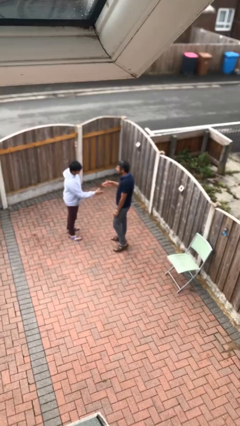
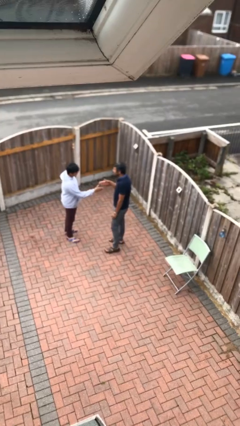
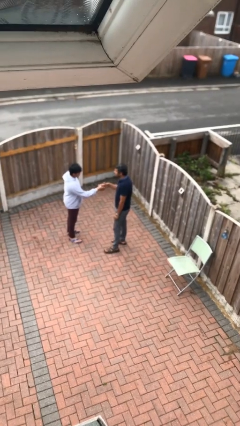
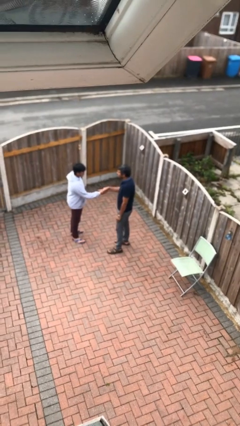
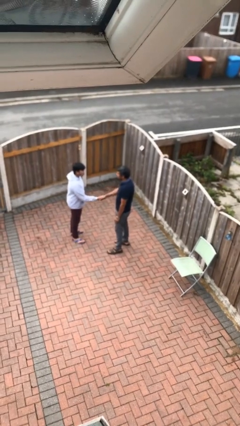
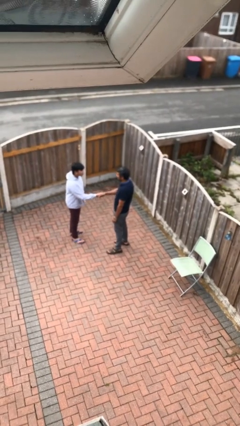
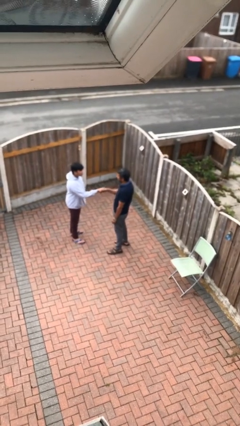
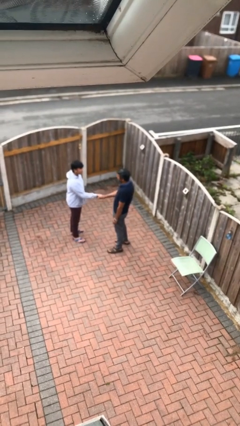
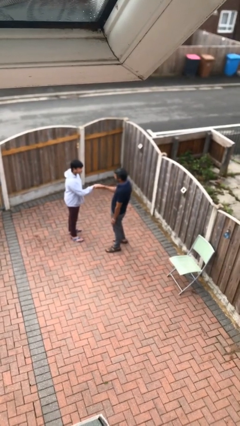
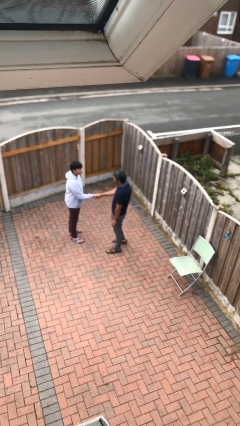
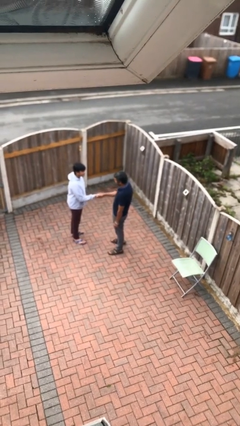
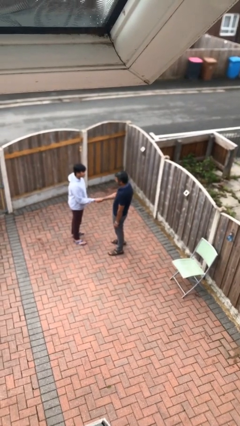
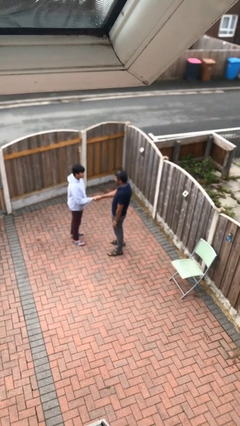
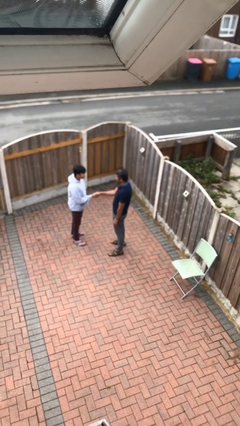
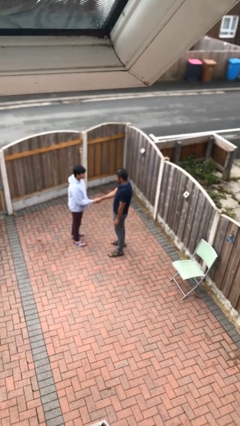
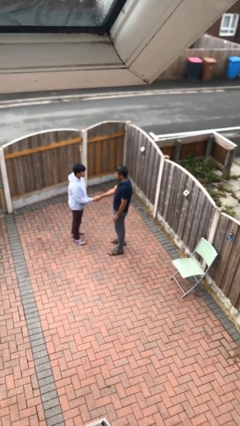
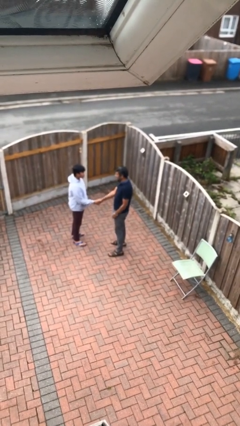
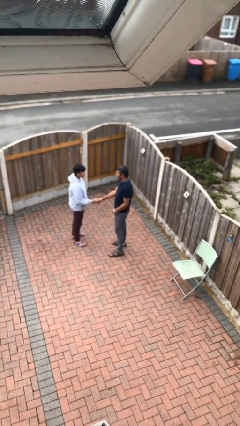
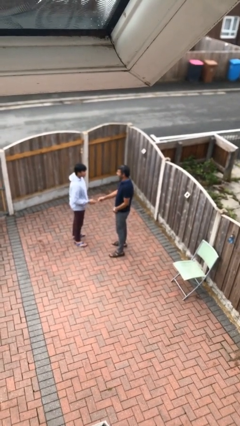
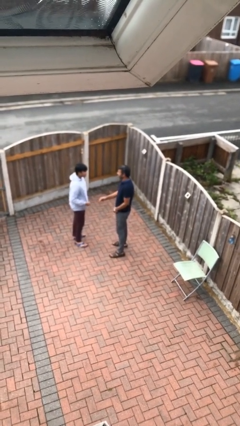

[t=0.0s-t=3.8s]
person shakes hand

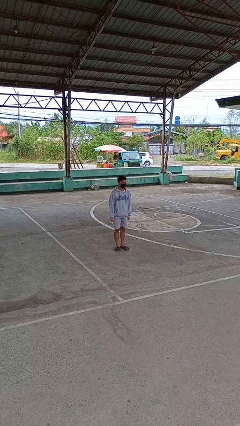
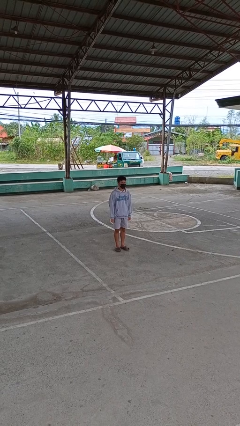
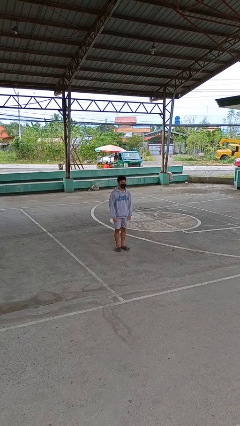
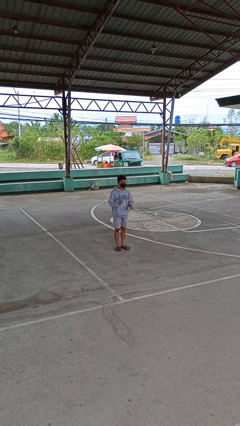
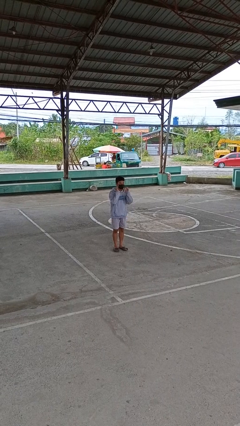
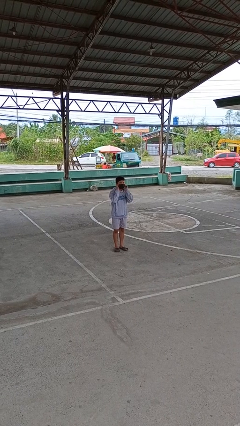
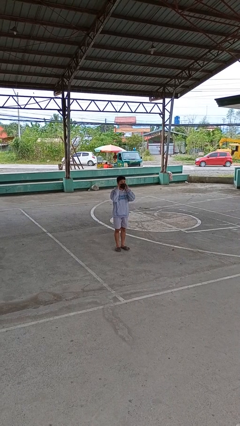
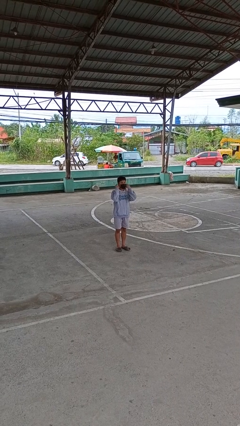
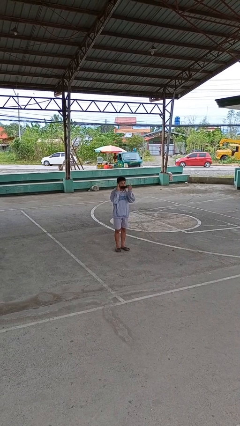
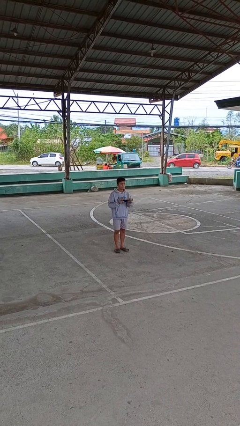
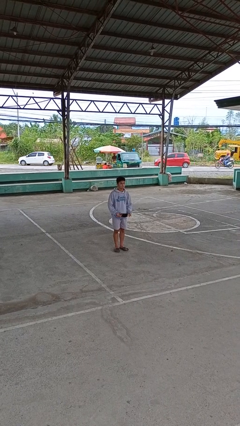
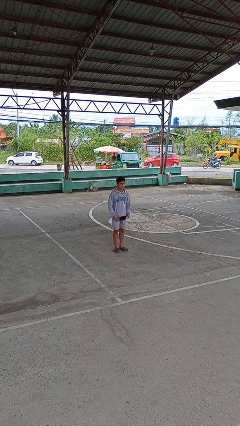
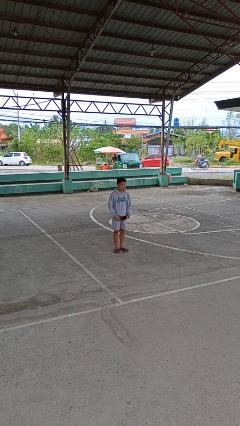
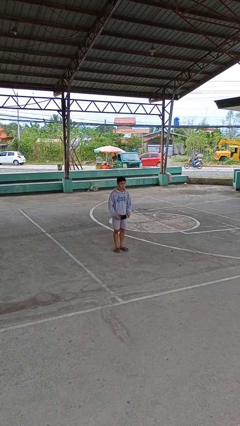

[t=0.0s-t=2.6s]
person takes off facemask

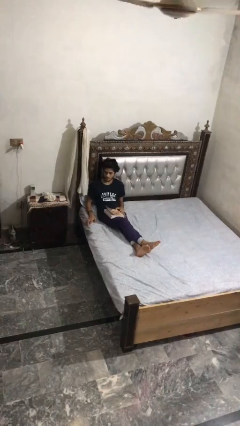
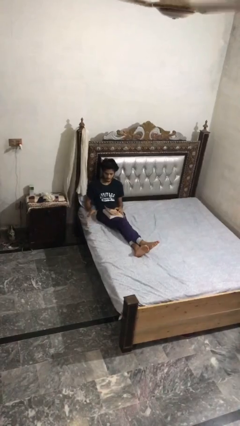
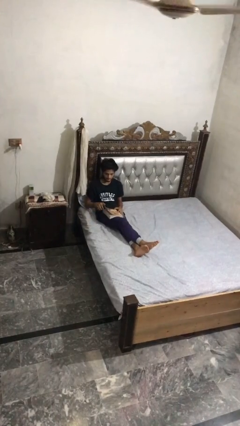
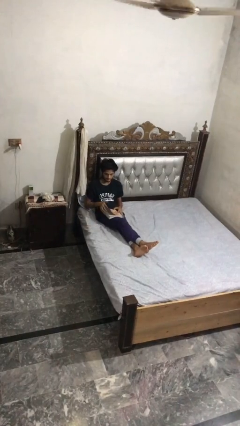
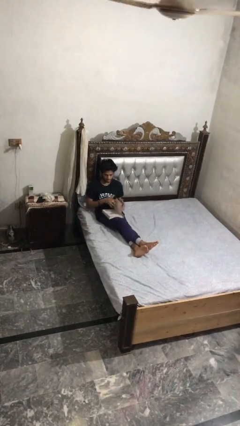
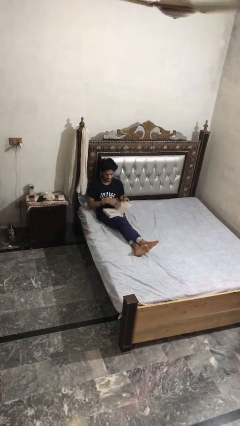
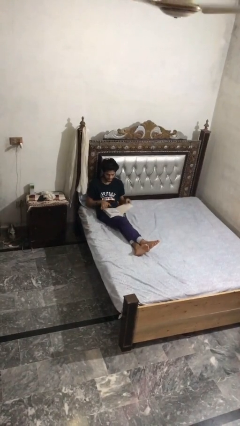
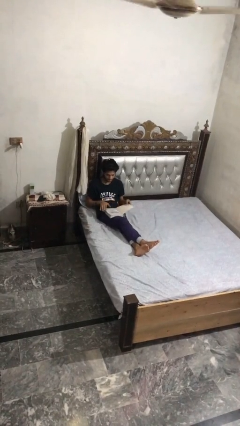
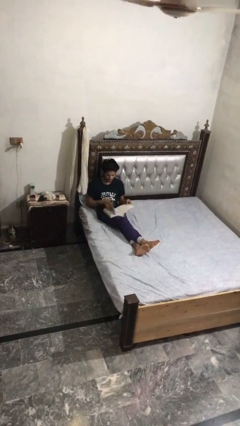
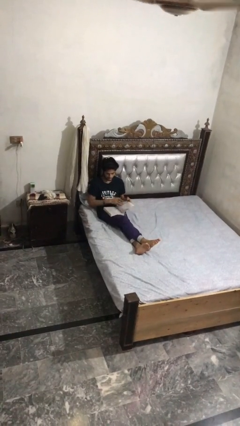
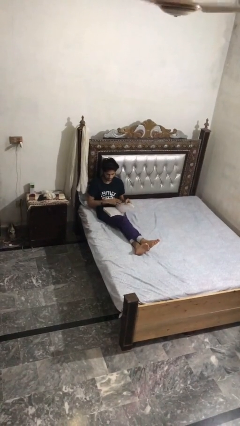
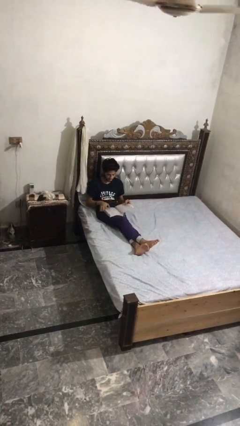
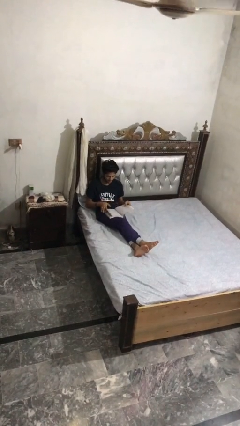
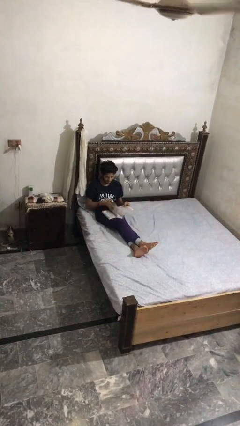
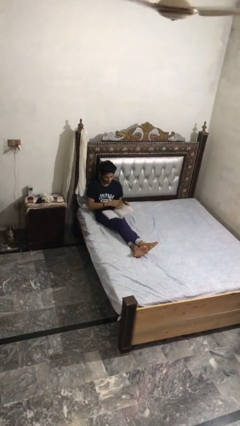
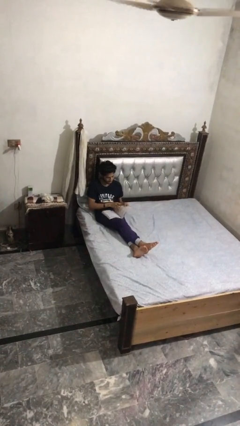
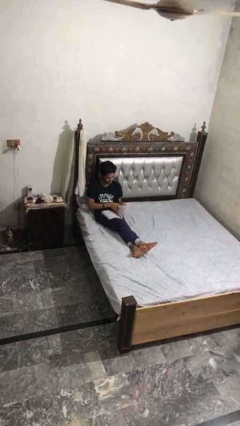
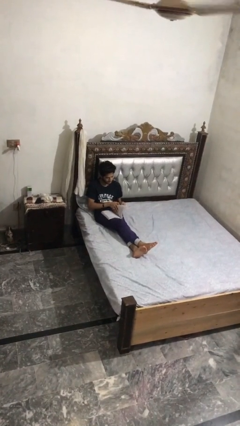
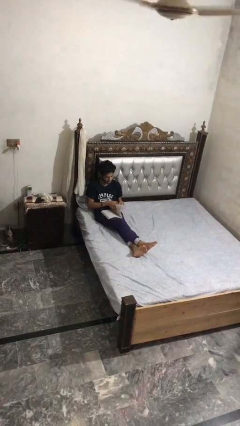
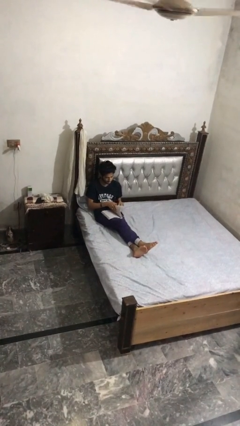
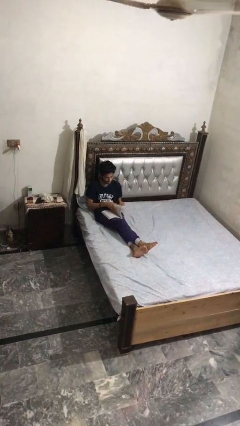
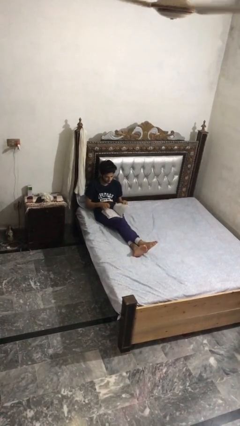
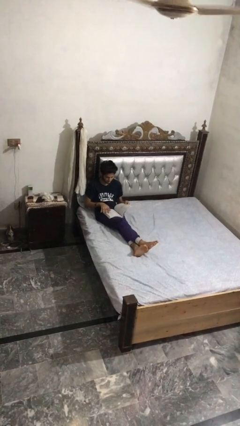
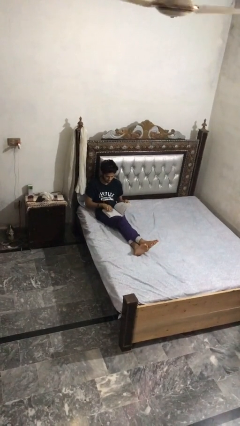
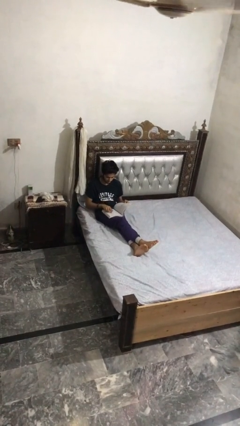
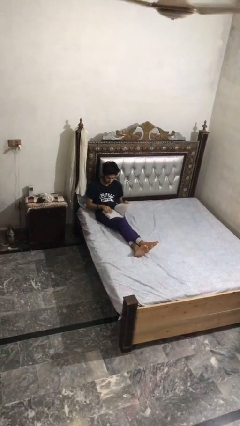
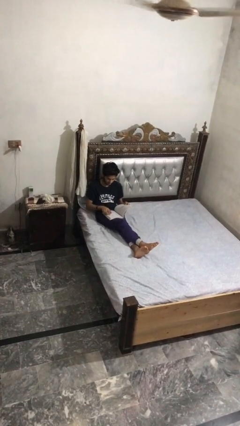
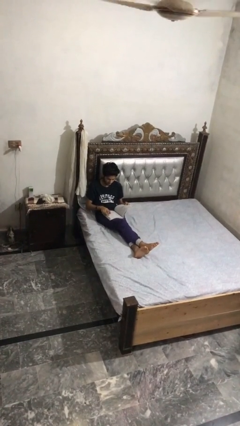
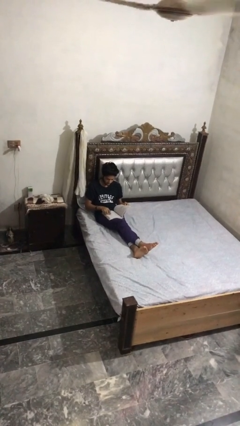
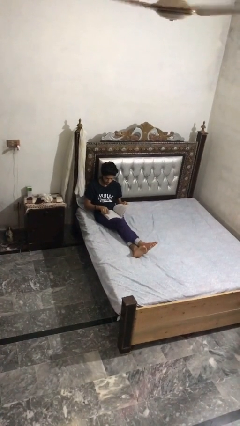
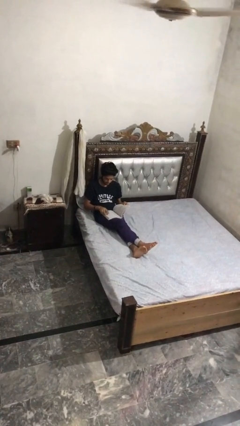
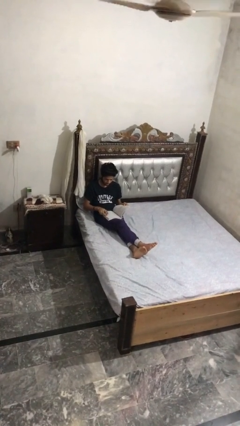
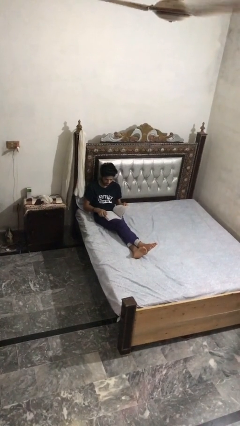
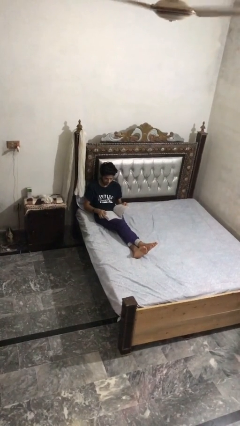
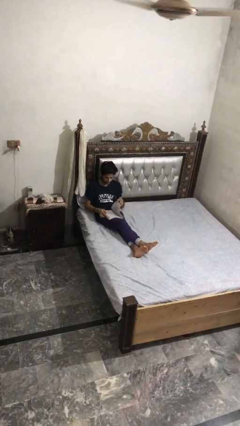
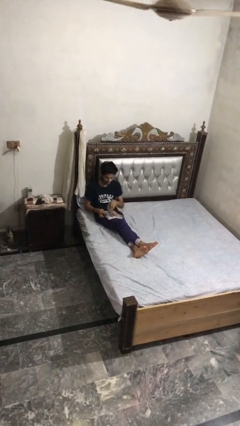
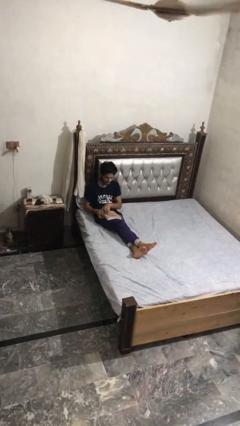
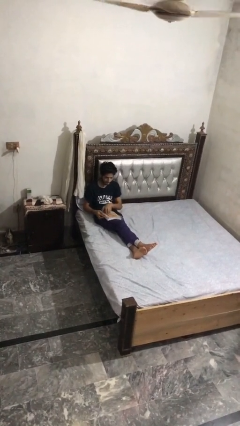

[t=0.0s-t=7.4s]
person reads book

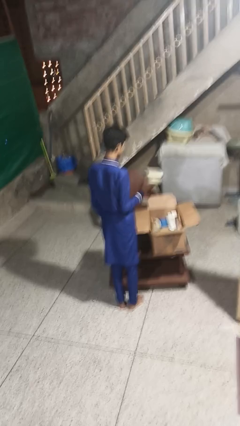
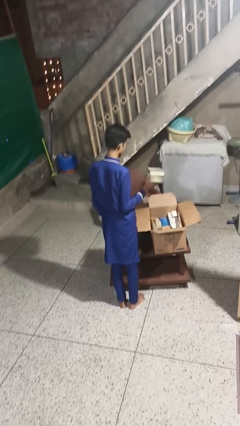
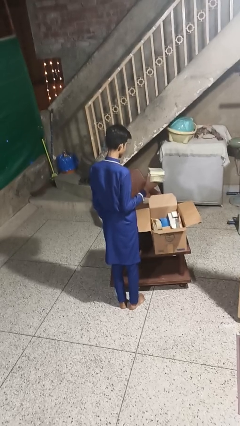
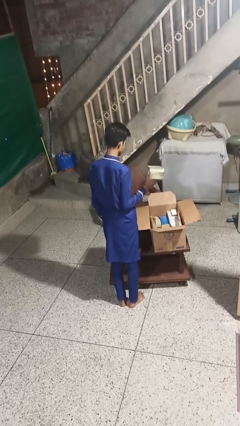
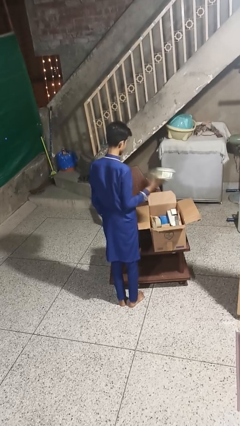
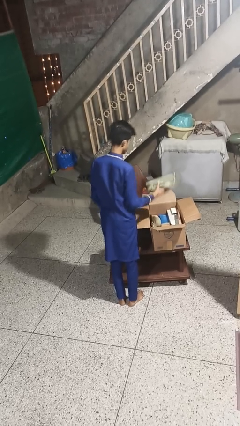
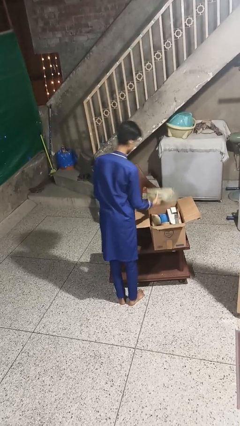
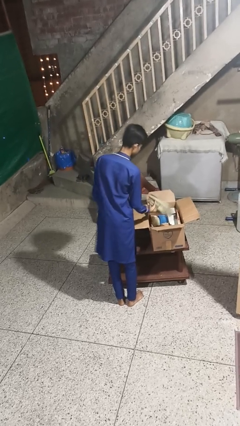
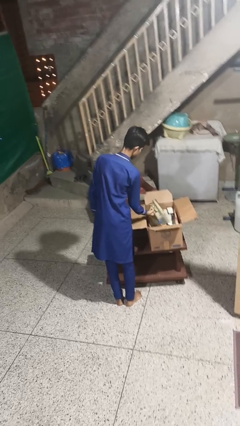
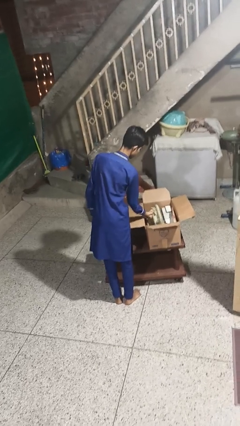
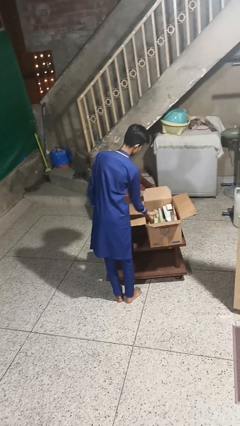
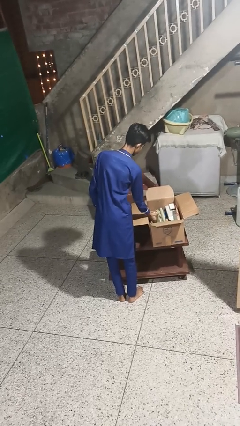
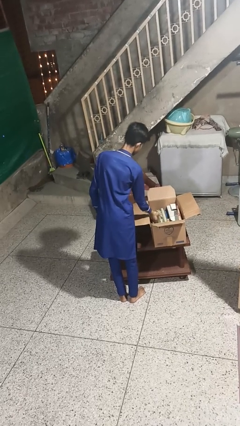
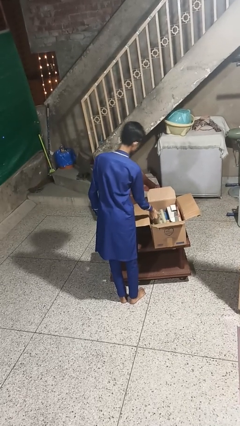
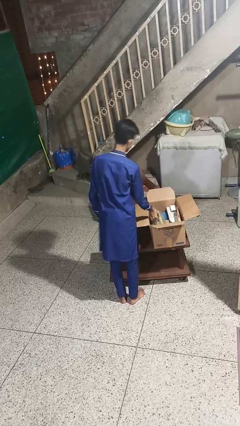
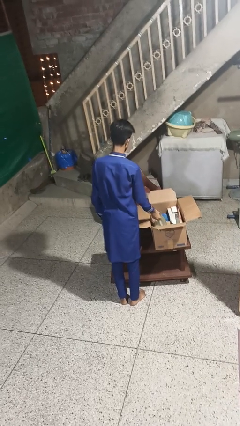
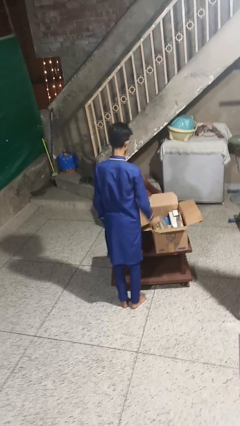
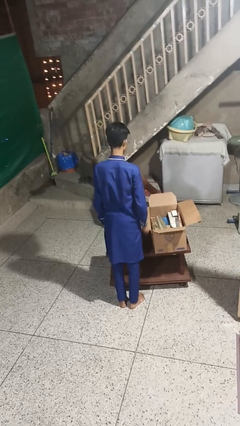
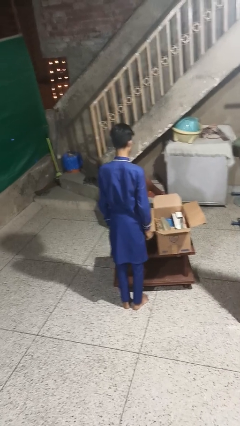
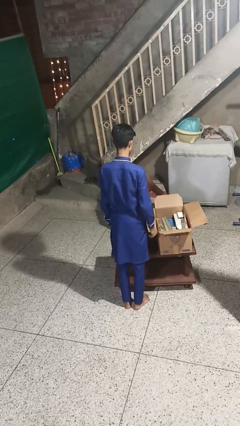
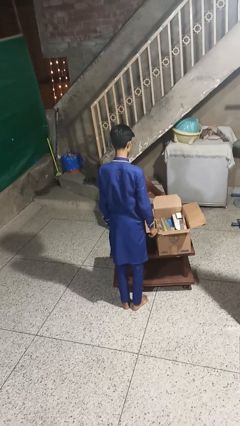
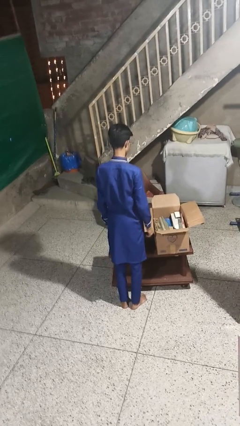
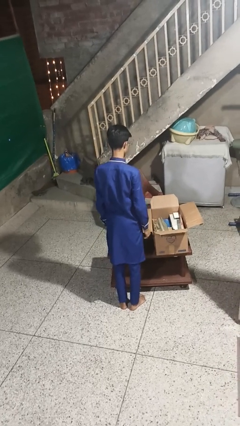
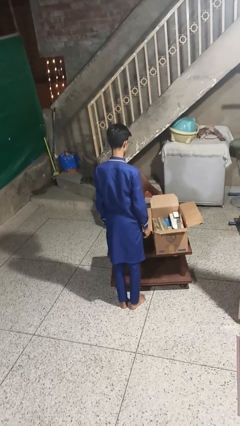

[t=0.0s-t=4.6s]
person puts object into box
